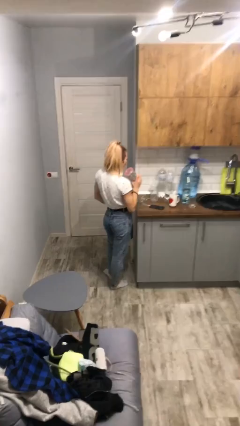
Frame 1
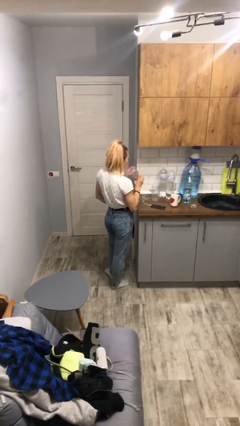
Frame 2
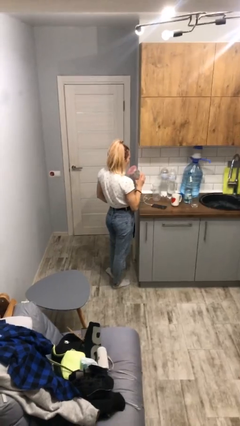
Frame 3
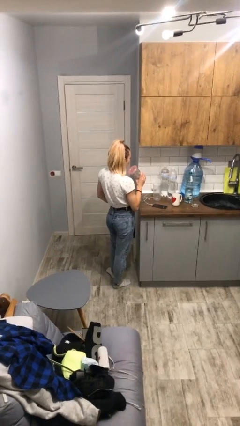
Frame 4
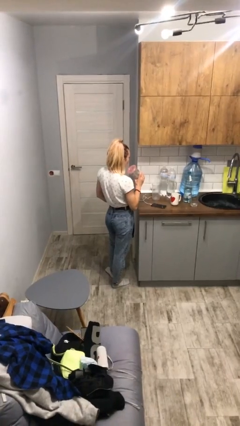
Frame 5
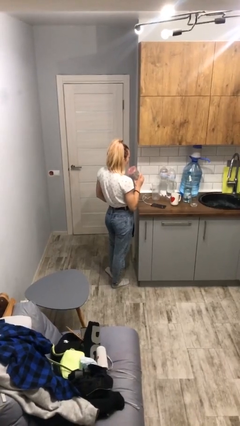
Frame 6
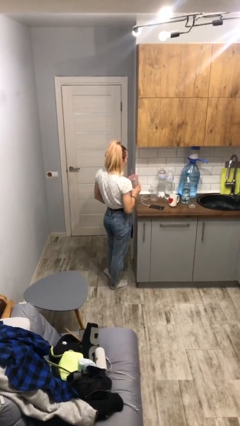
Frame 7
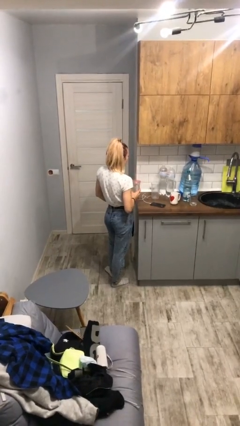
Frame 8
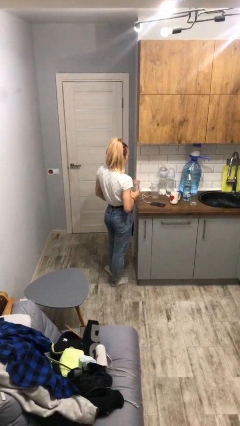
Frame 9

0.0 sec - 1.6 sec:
person drinks from straw

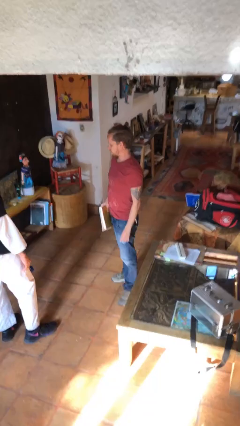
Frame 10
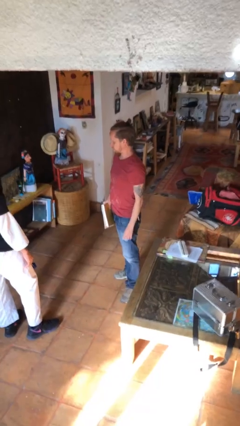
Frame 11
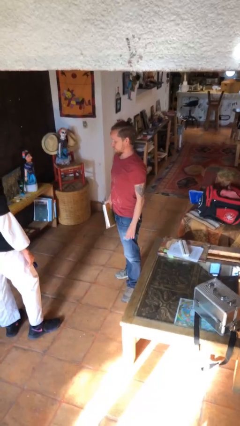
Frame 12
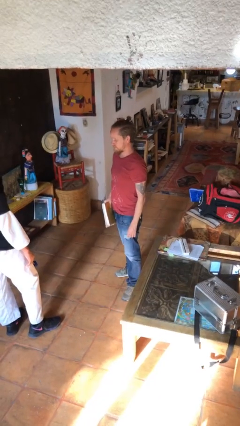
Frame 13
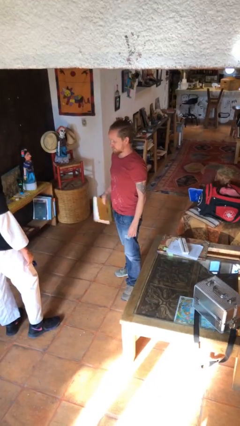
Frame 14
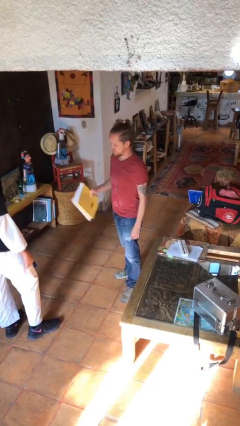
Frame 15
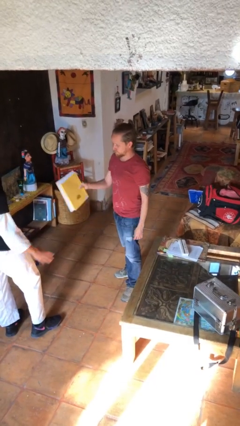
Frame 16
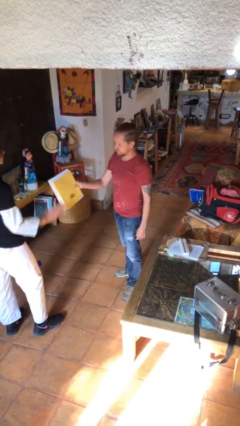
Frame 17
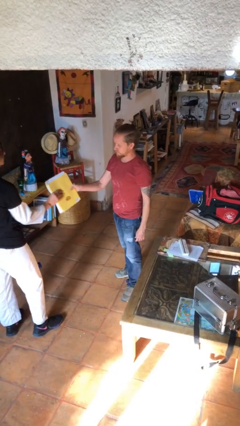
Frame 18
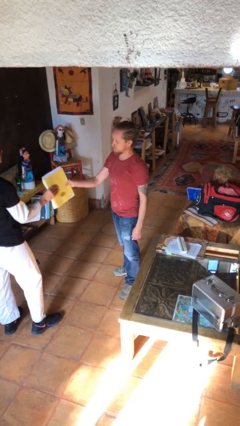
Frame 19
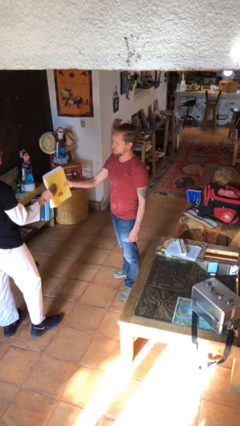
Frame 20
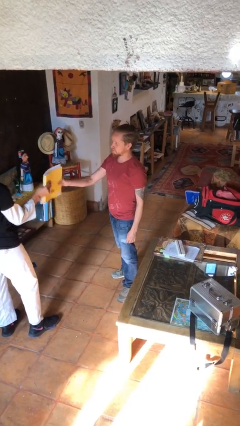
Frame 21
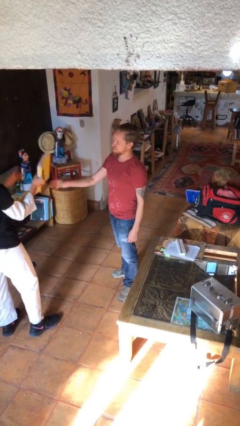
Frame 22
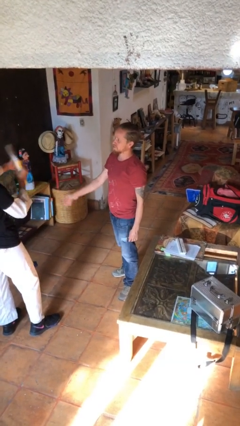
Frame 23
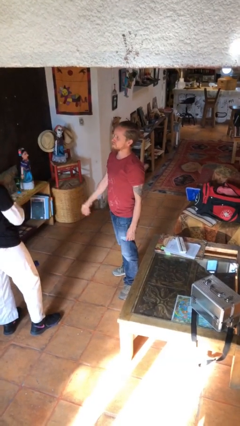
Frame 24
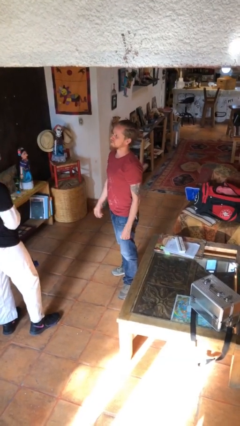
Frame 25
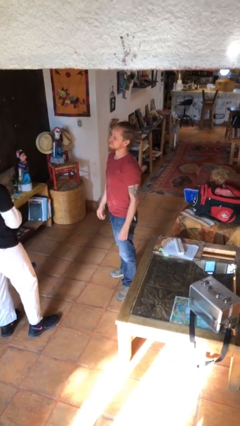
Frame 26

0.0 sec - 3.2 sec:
person transfers object to person

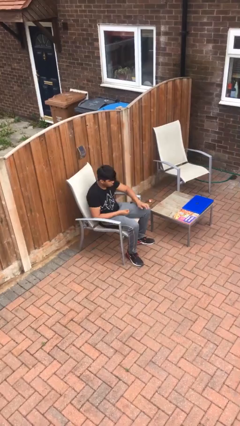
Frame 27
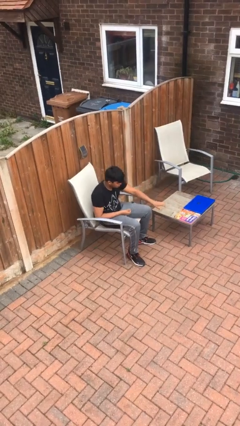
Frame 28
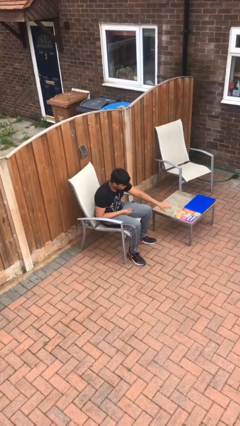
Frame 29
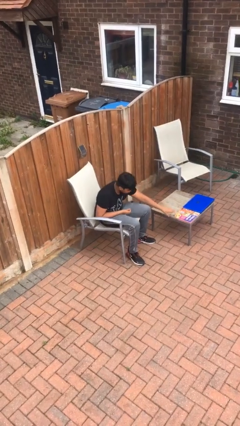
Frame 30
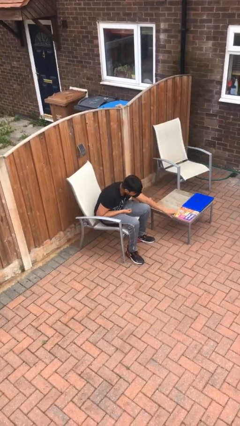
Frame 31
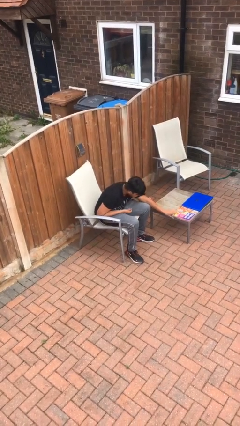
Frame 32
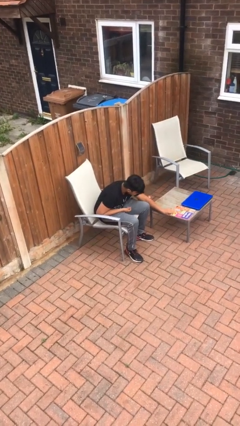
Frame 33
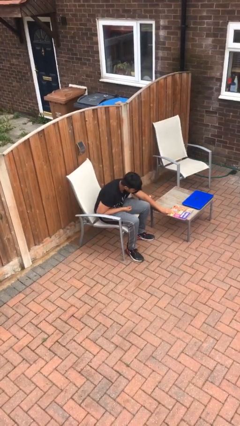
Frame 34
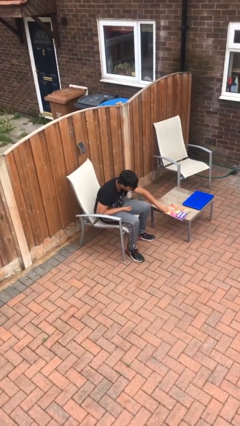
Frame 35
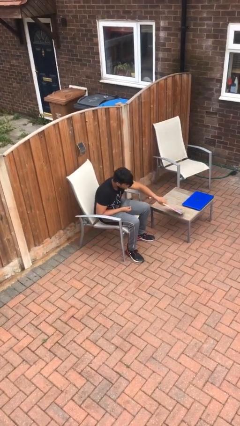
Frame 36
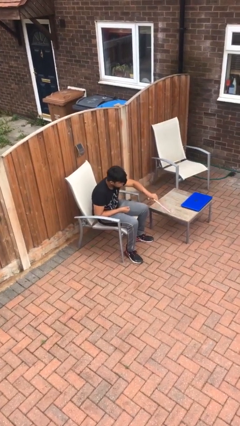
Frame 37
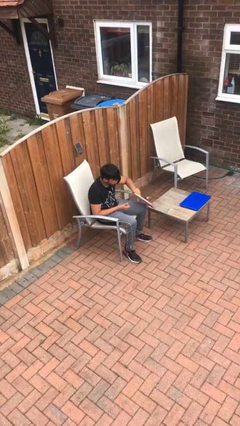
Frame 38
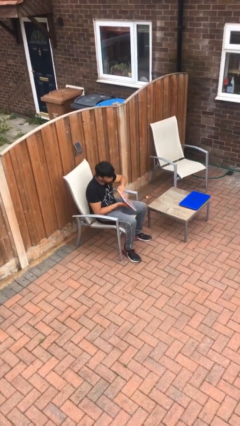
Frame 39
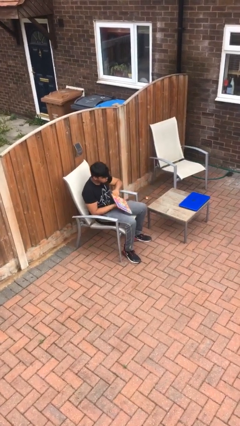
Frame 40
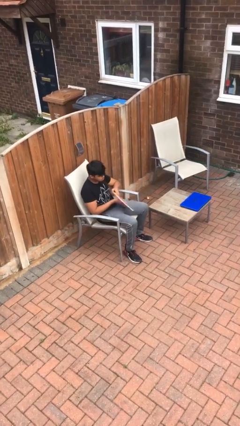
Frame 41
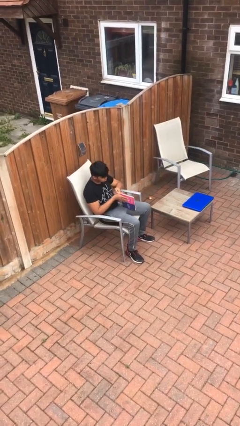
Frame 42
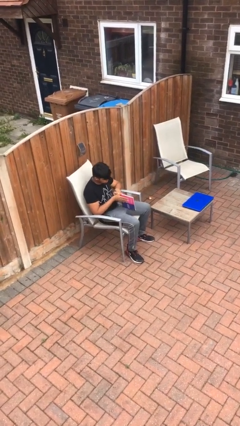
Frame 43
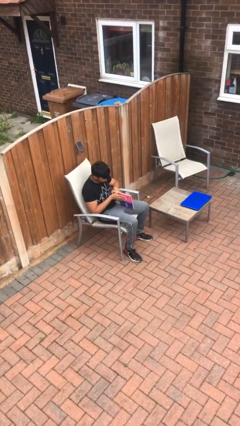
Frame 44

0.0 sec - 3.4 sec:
person picks up object from table

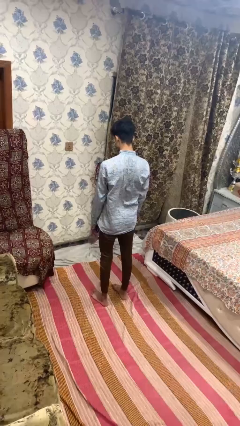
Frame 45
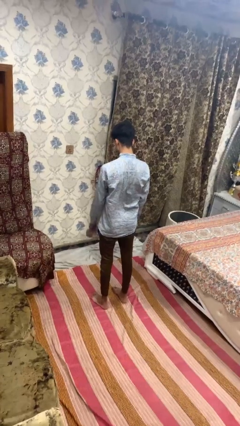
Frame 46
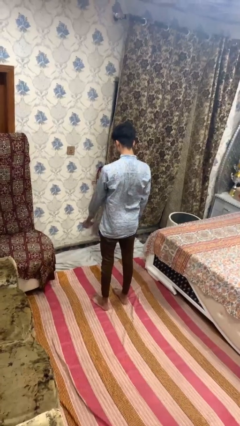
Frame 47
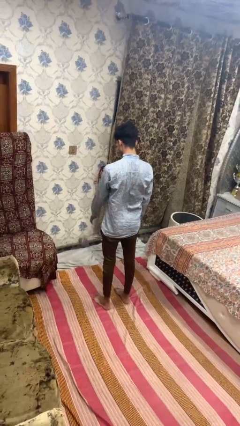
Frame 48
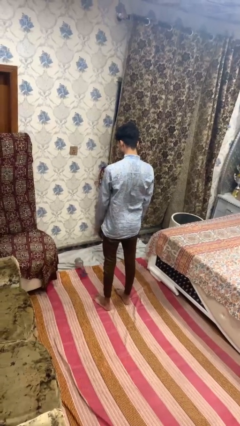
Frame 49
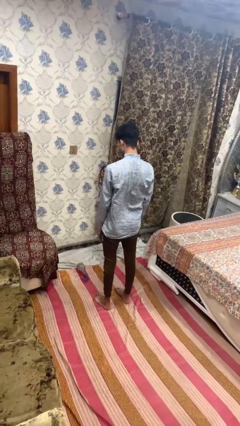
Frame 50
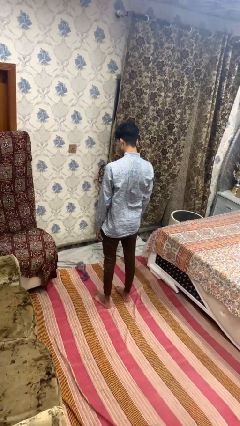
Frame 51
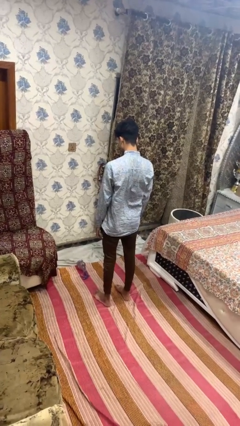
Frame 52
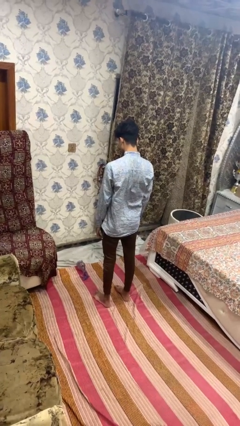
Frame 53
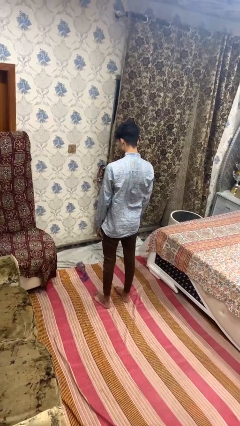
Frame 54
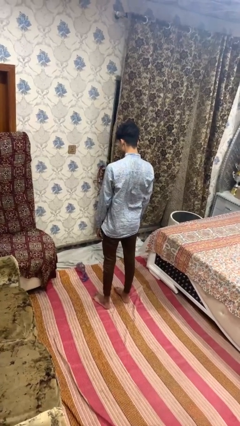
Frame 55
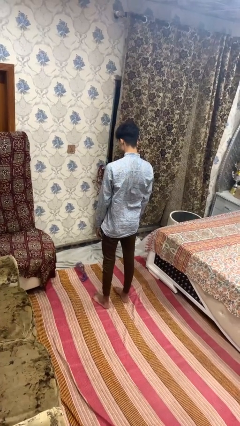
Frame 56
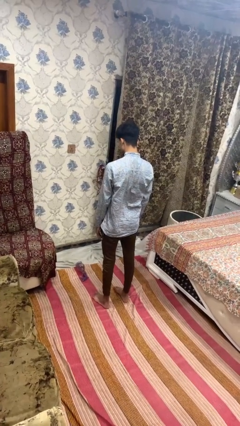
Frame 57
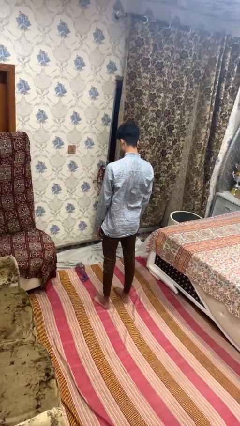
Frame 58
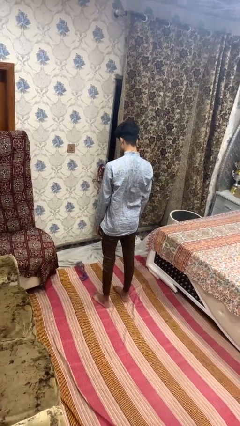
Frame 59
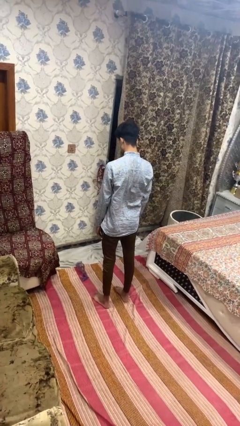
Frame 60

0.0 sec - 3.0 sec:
person throws object to ground

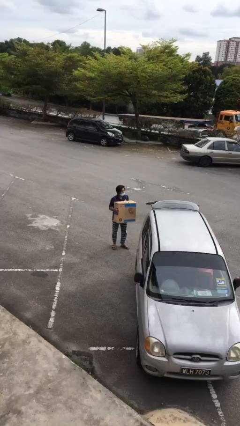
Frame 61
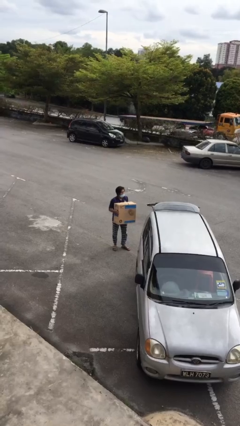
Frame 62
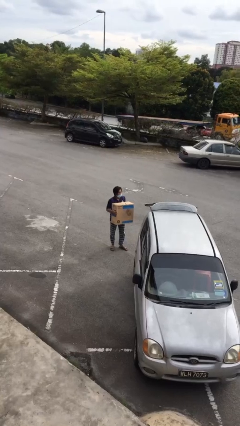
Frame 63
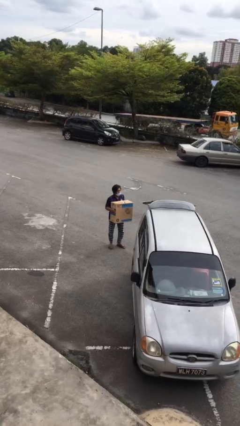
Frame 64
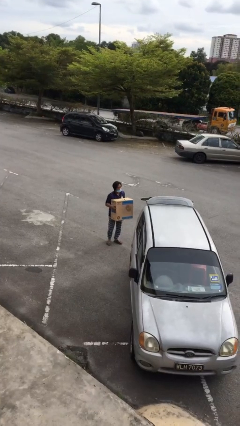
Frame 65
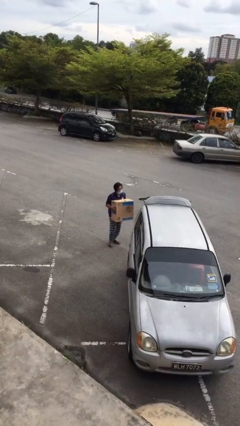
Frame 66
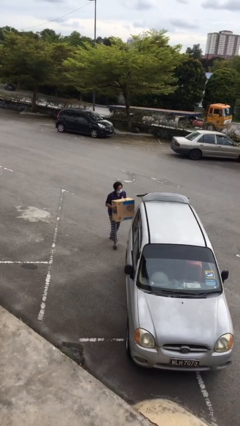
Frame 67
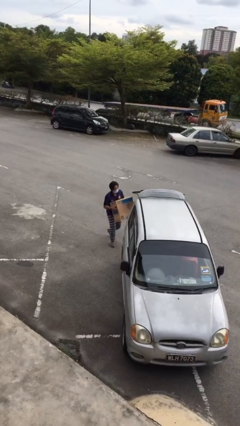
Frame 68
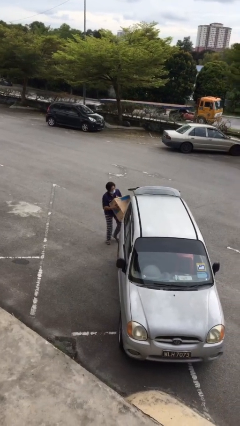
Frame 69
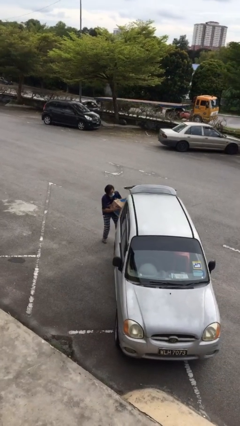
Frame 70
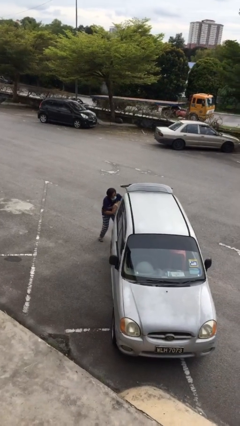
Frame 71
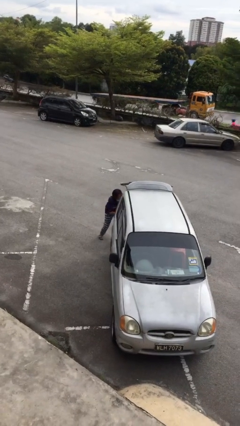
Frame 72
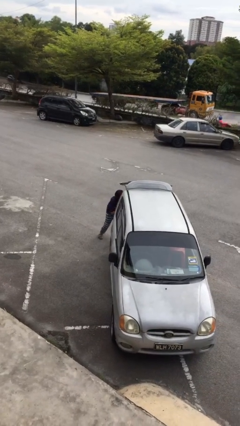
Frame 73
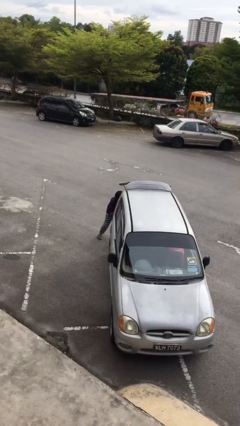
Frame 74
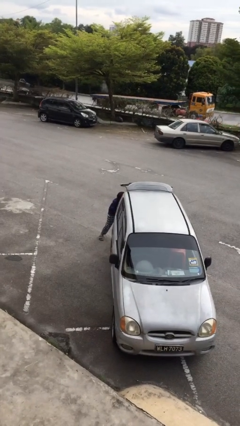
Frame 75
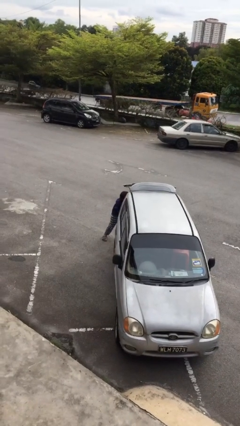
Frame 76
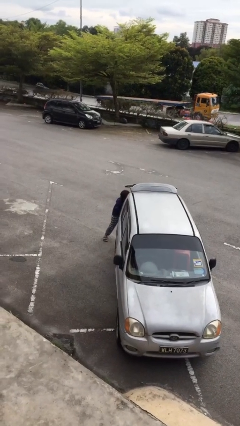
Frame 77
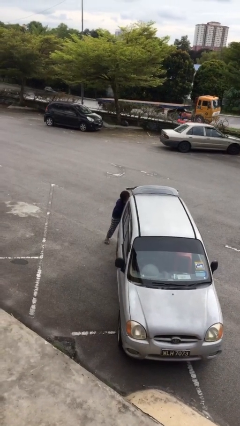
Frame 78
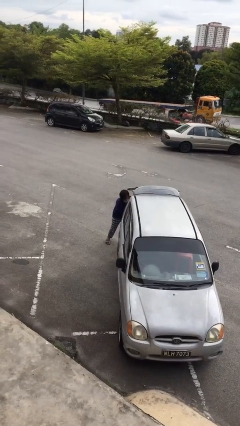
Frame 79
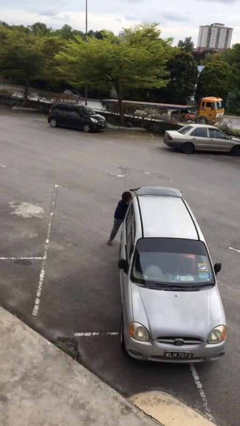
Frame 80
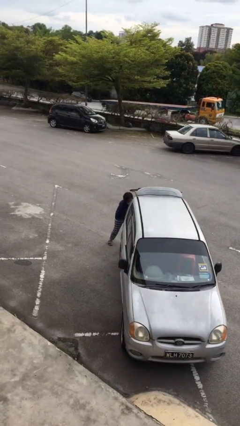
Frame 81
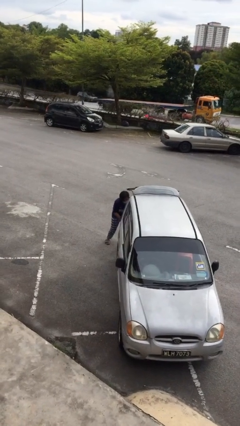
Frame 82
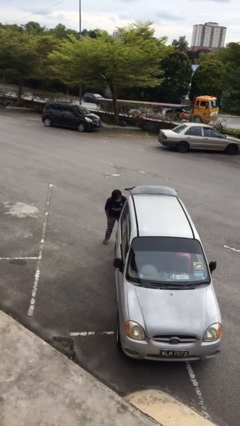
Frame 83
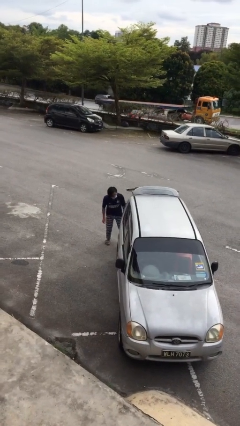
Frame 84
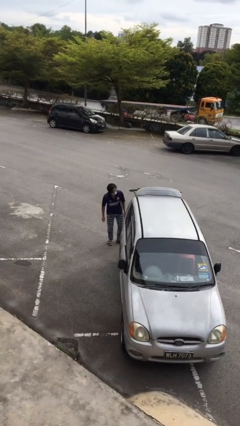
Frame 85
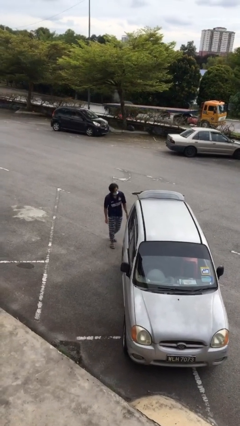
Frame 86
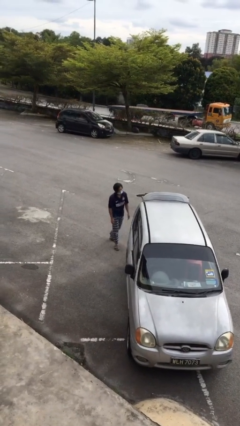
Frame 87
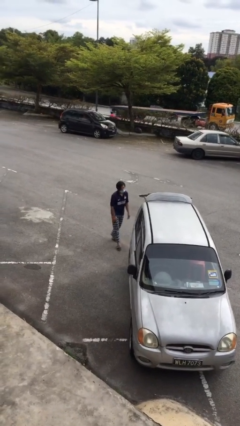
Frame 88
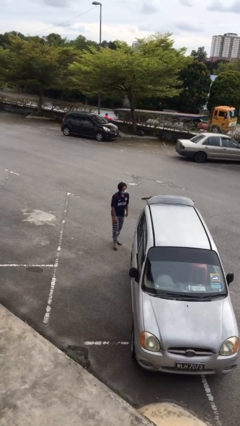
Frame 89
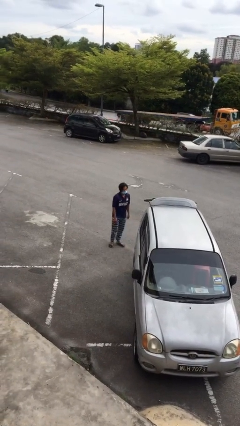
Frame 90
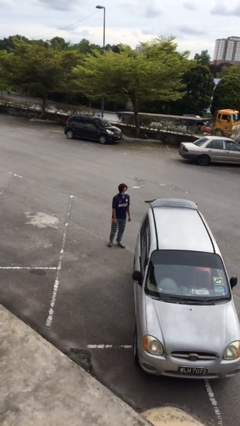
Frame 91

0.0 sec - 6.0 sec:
person loads car

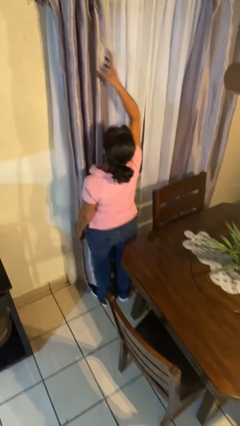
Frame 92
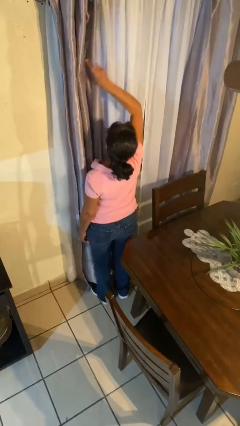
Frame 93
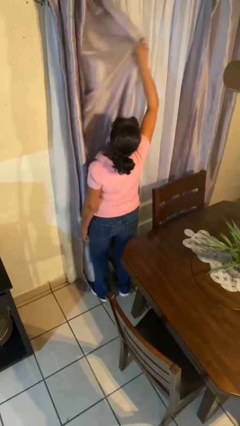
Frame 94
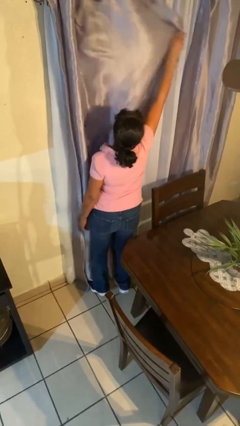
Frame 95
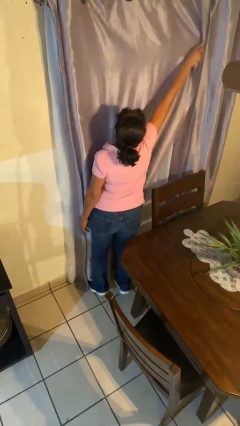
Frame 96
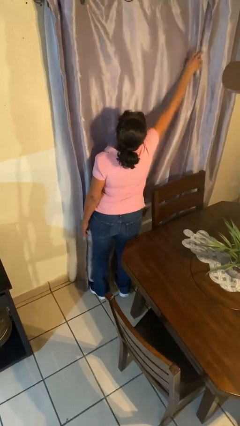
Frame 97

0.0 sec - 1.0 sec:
person closes curtains
